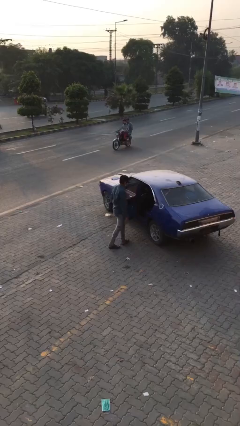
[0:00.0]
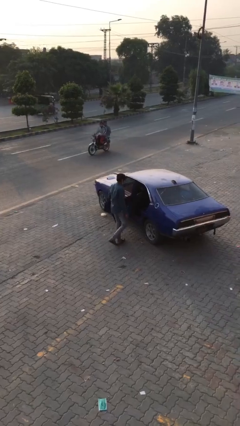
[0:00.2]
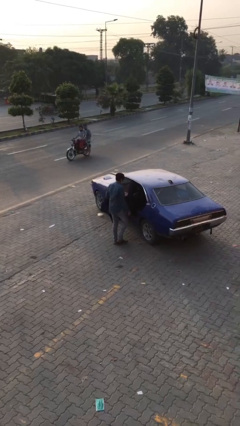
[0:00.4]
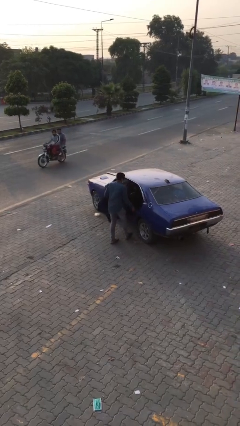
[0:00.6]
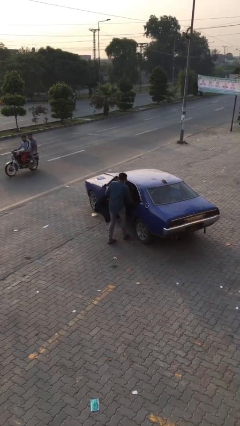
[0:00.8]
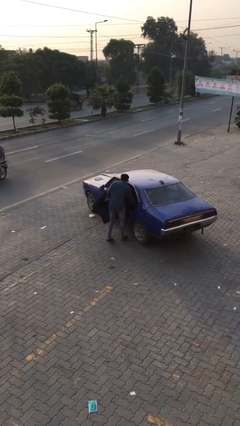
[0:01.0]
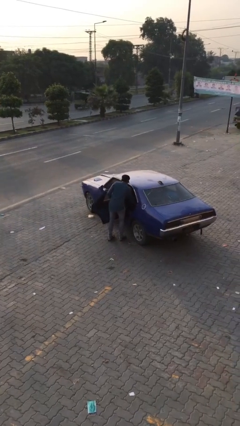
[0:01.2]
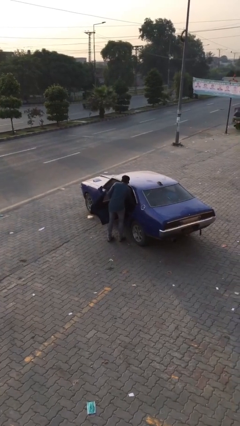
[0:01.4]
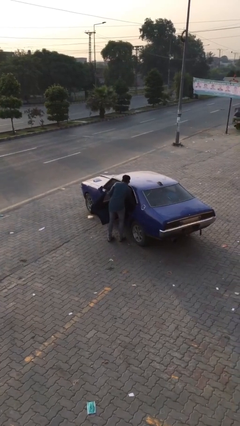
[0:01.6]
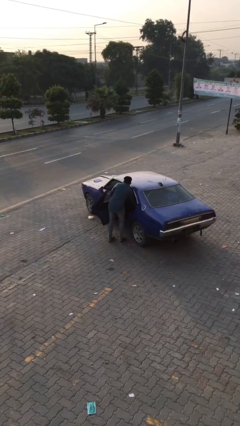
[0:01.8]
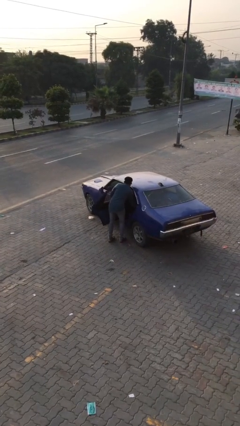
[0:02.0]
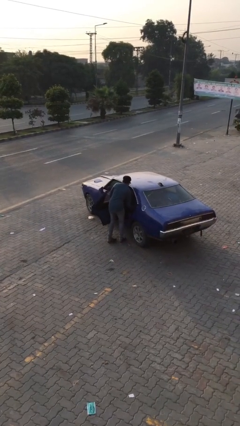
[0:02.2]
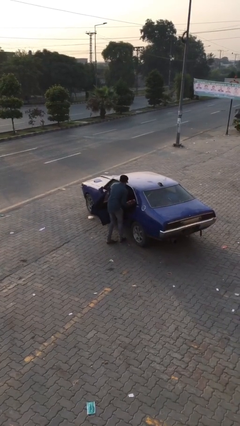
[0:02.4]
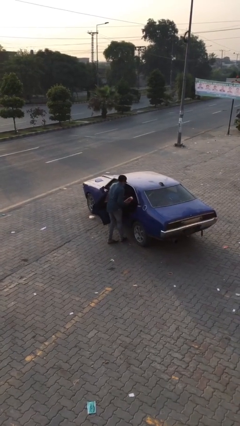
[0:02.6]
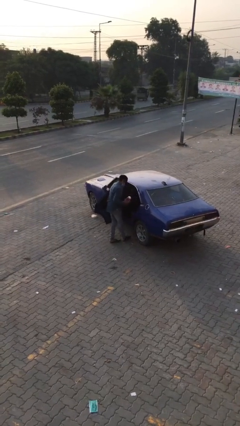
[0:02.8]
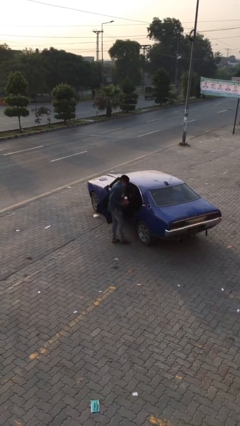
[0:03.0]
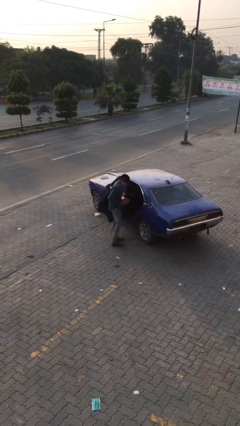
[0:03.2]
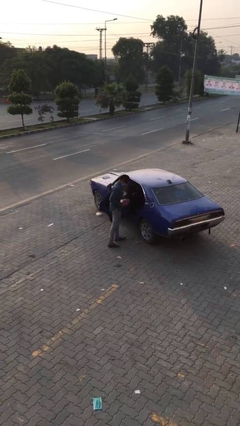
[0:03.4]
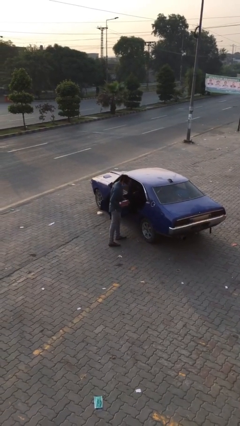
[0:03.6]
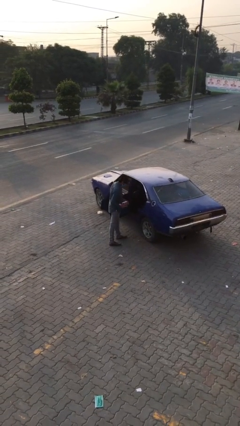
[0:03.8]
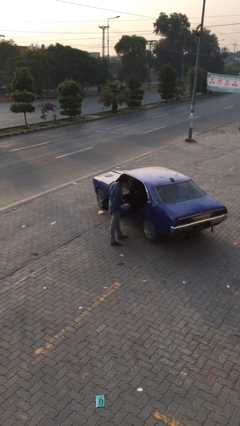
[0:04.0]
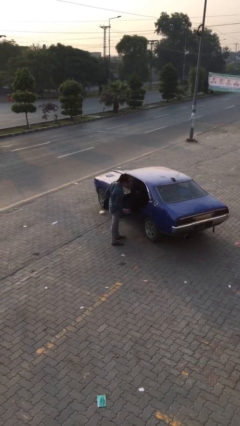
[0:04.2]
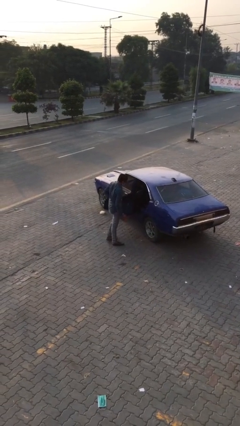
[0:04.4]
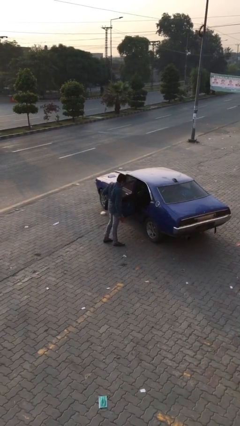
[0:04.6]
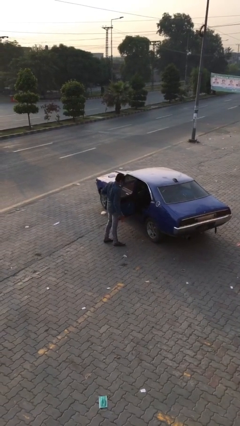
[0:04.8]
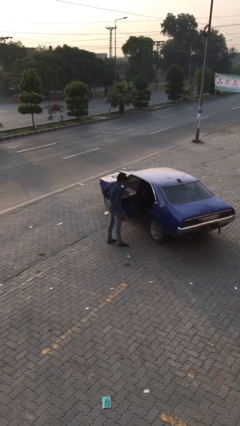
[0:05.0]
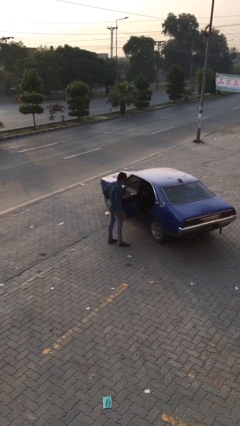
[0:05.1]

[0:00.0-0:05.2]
person unloads car

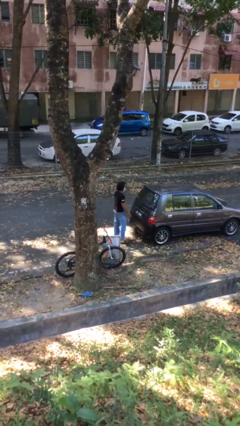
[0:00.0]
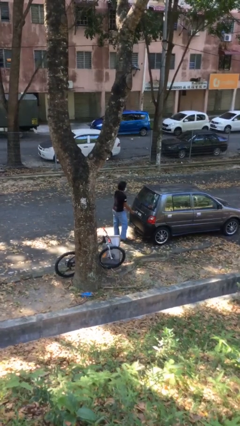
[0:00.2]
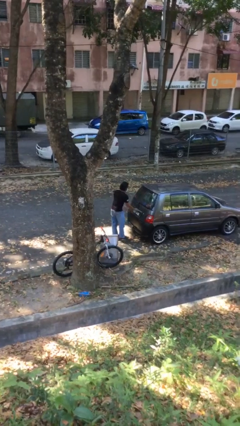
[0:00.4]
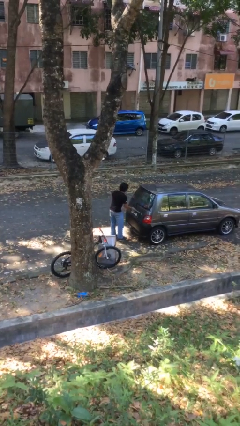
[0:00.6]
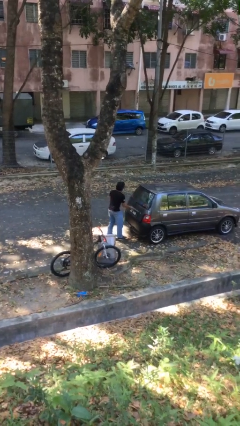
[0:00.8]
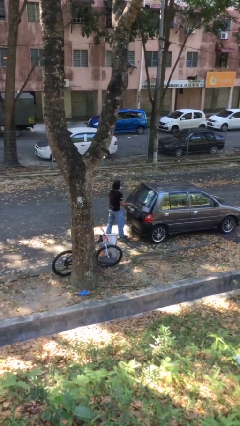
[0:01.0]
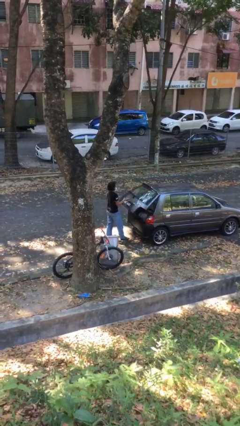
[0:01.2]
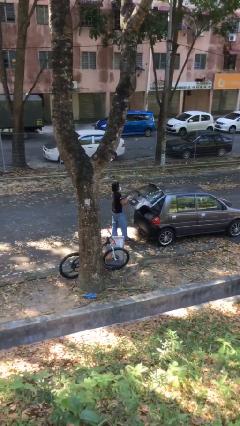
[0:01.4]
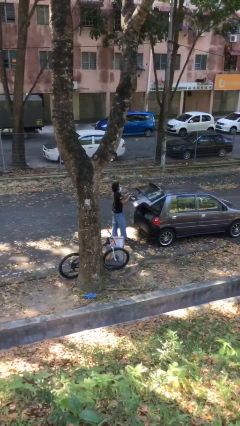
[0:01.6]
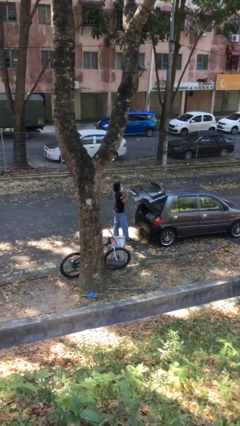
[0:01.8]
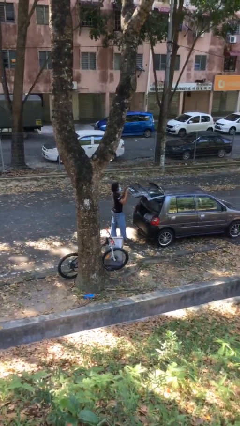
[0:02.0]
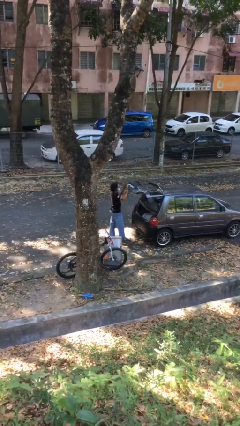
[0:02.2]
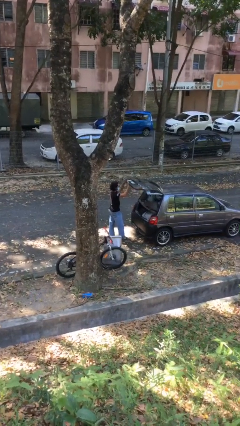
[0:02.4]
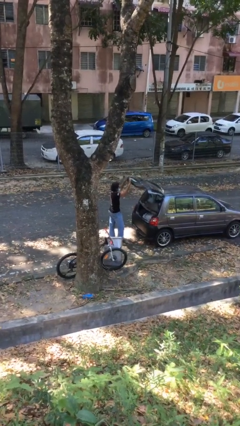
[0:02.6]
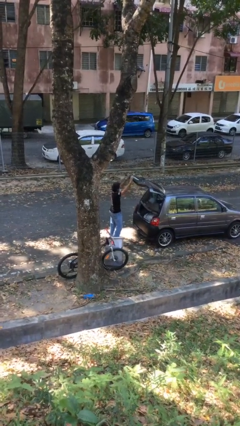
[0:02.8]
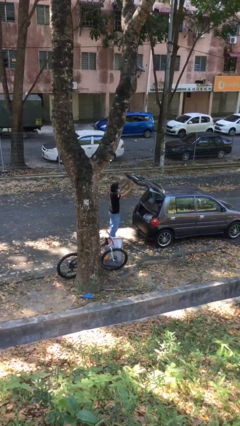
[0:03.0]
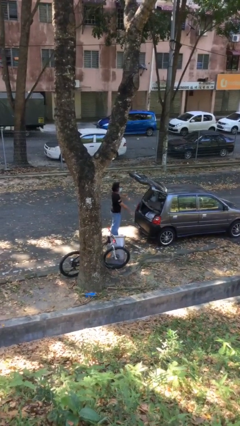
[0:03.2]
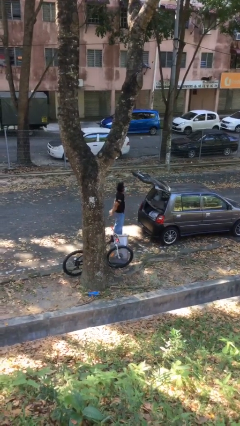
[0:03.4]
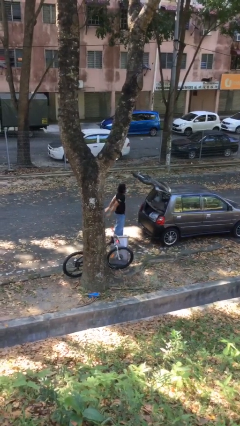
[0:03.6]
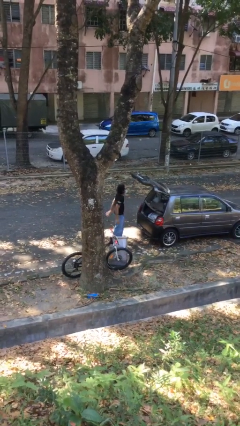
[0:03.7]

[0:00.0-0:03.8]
person opens car trunk

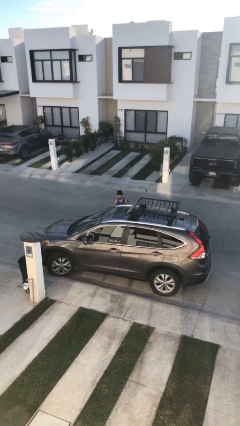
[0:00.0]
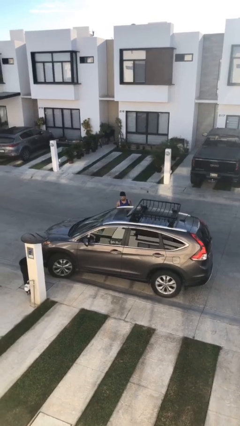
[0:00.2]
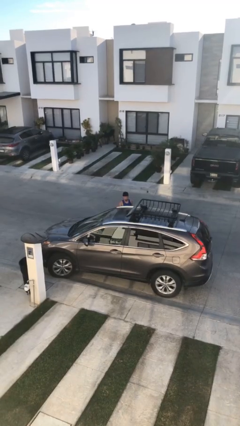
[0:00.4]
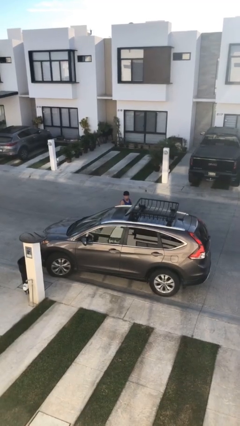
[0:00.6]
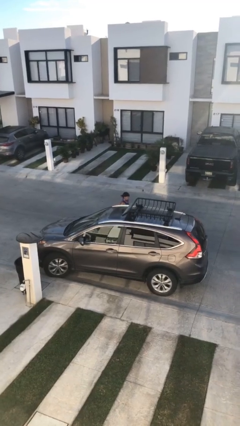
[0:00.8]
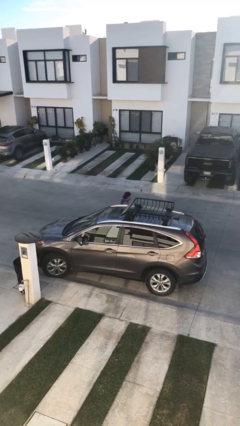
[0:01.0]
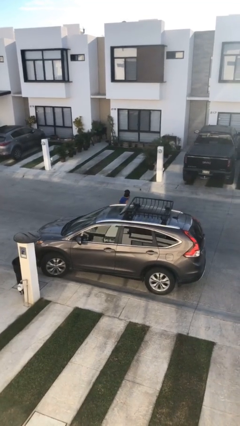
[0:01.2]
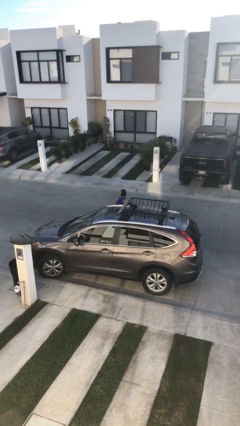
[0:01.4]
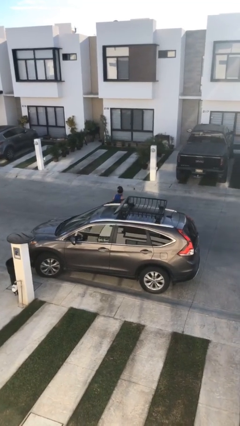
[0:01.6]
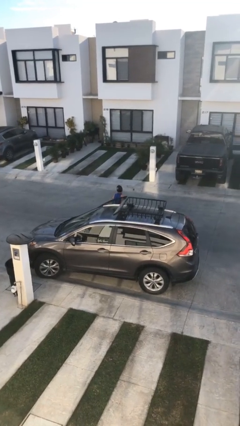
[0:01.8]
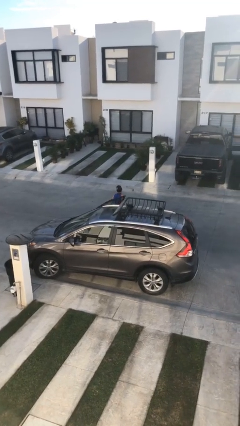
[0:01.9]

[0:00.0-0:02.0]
person opens car door

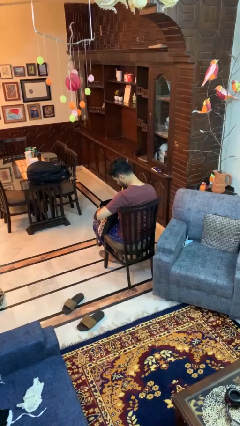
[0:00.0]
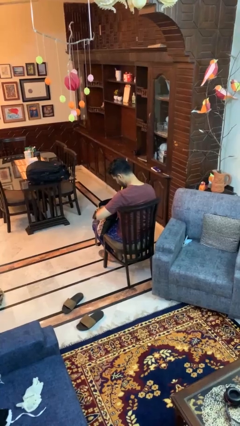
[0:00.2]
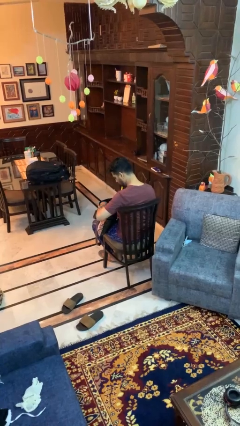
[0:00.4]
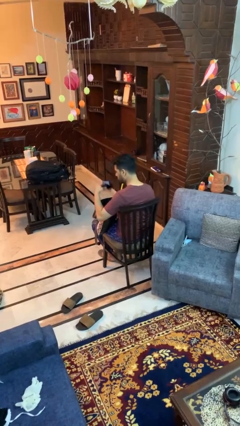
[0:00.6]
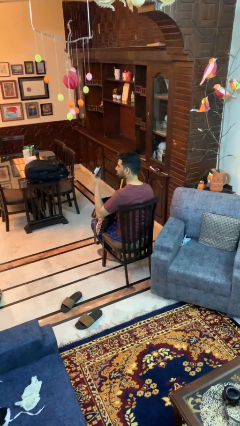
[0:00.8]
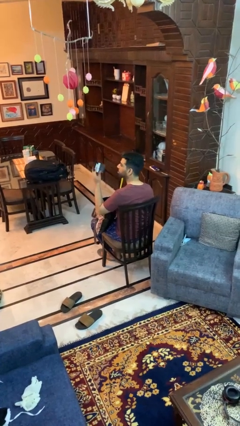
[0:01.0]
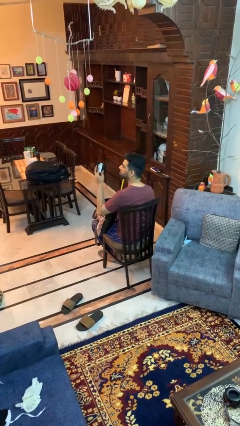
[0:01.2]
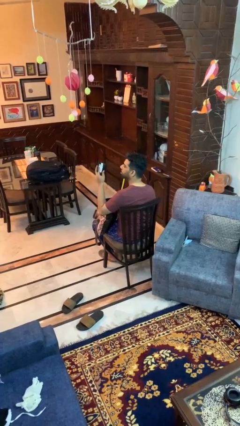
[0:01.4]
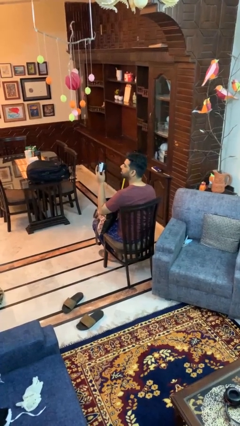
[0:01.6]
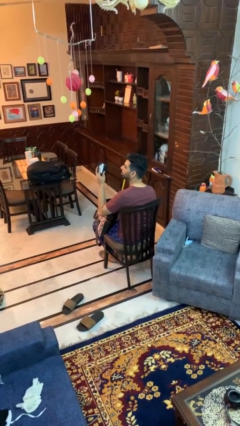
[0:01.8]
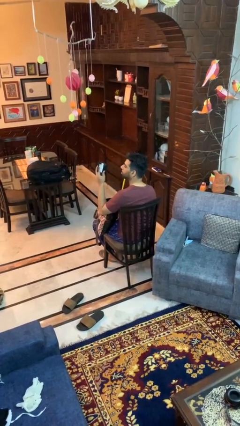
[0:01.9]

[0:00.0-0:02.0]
person takes object from purse

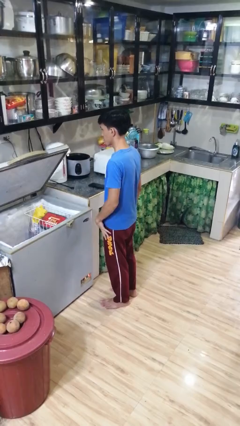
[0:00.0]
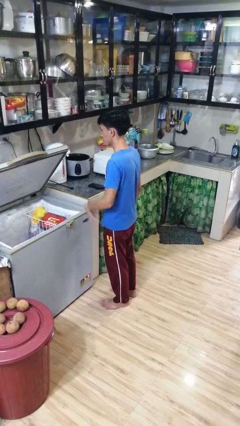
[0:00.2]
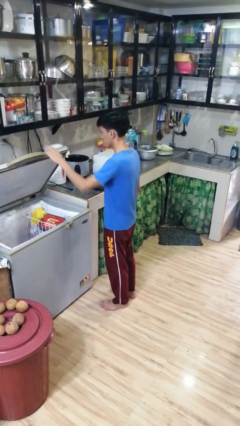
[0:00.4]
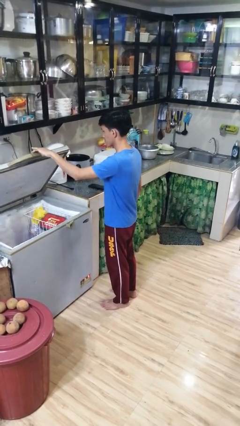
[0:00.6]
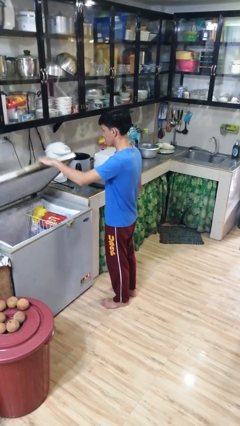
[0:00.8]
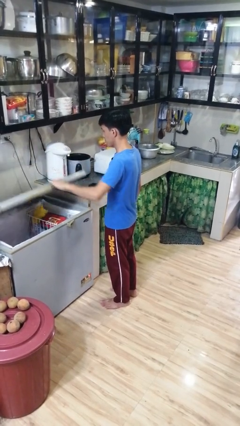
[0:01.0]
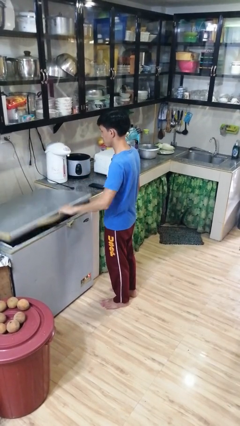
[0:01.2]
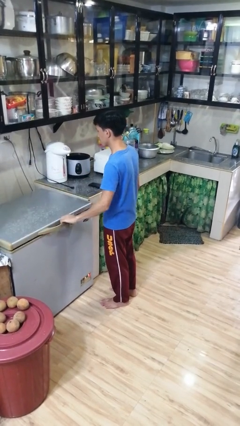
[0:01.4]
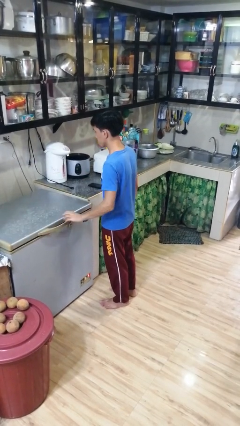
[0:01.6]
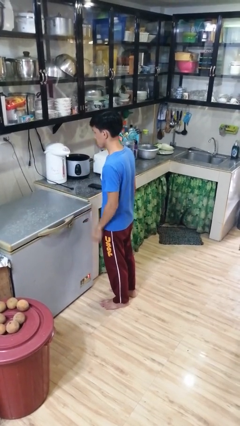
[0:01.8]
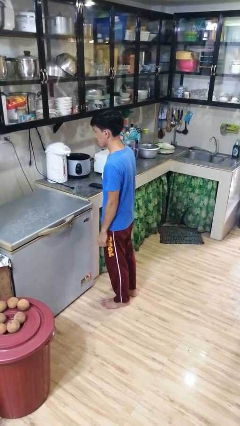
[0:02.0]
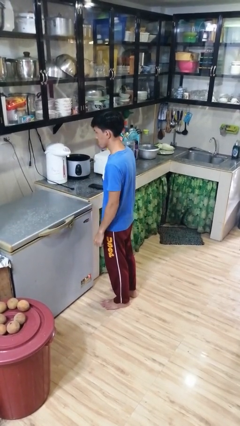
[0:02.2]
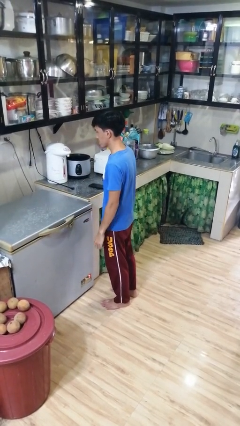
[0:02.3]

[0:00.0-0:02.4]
person closes refrigerator

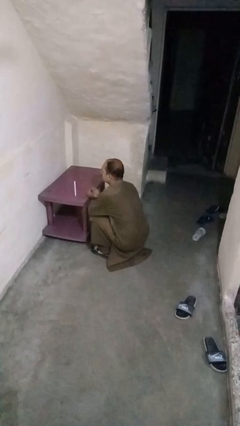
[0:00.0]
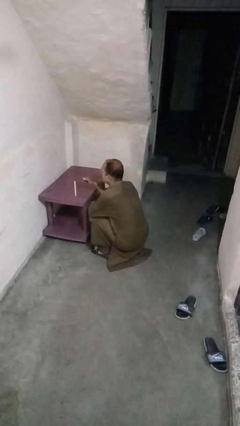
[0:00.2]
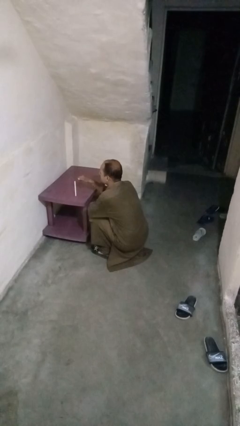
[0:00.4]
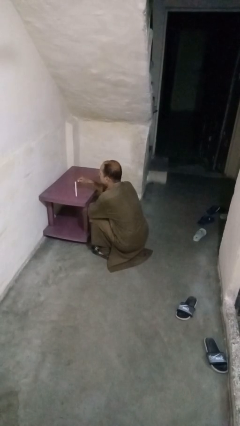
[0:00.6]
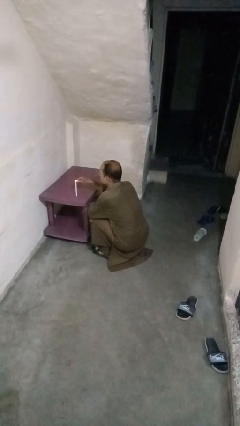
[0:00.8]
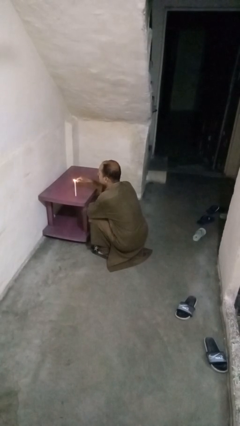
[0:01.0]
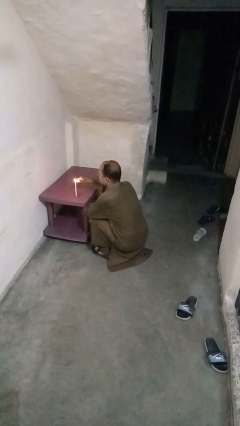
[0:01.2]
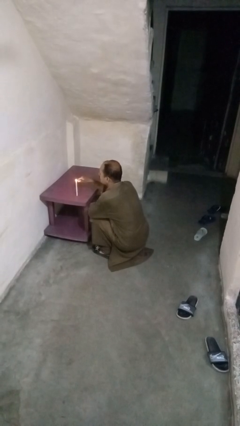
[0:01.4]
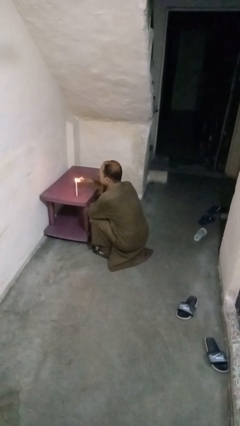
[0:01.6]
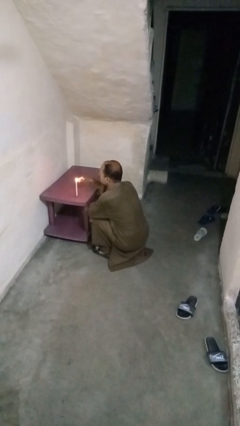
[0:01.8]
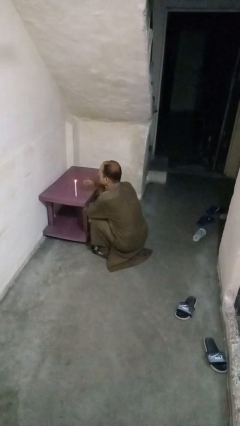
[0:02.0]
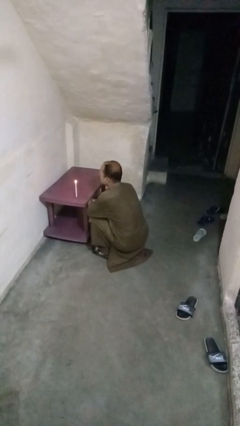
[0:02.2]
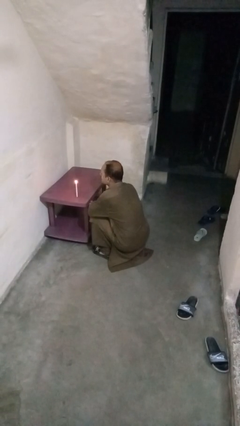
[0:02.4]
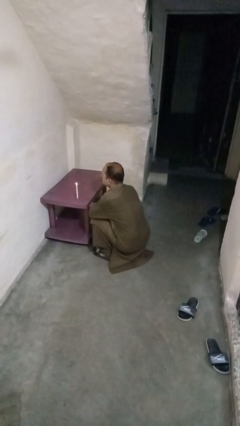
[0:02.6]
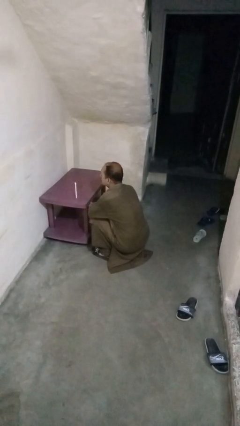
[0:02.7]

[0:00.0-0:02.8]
person lights candle
